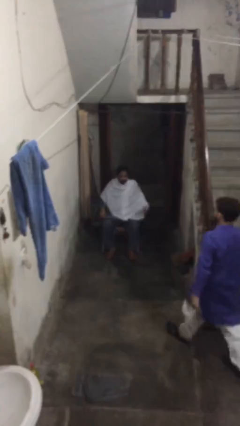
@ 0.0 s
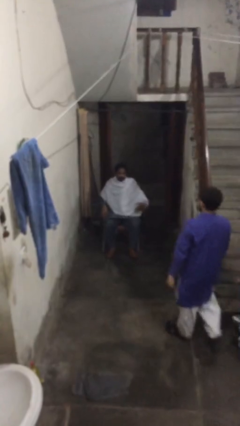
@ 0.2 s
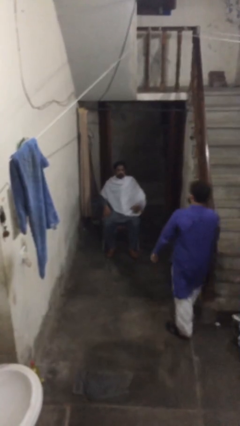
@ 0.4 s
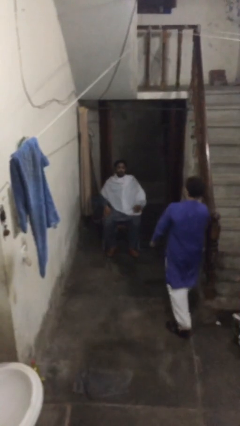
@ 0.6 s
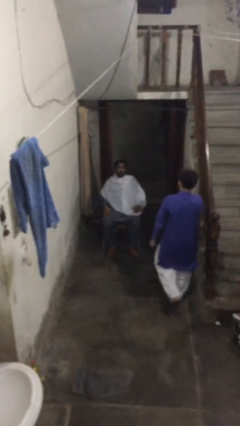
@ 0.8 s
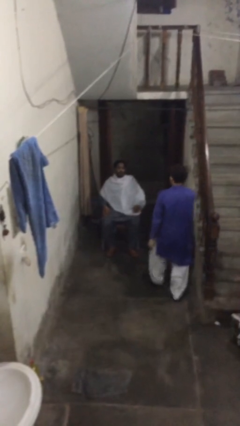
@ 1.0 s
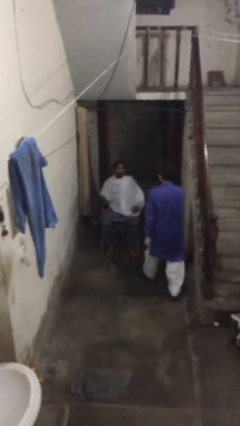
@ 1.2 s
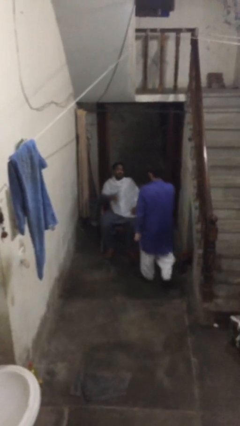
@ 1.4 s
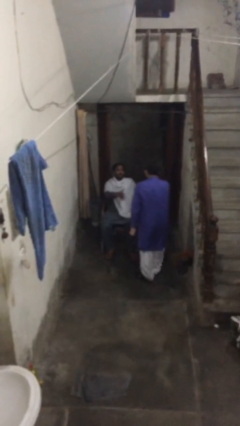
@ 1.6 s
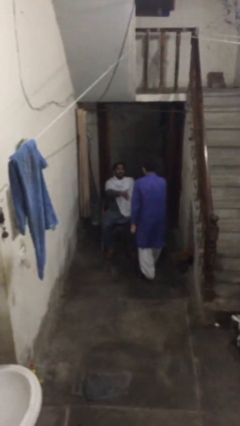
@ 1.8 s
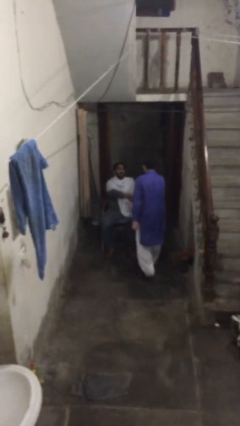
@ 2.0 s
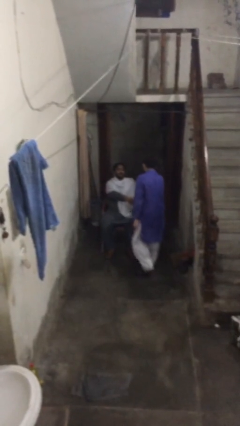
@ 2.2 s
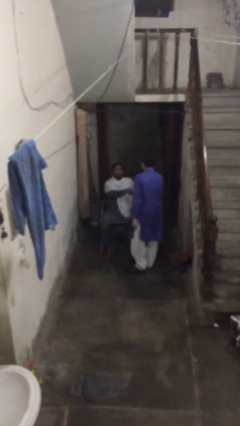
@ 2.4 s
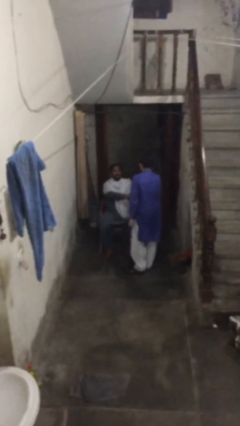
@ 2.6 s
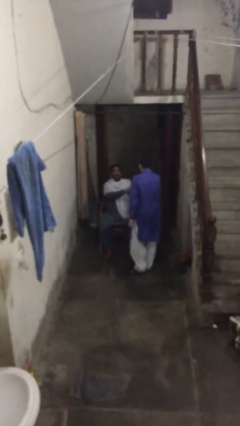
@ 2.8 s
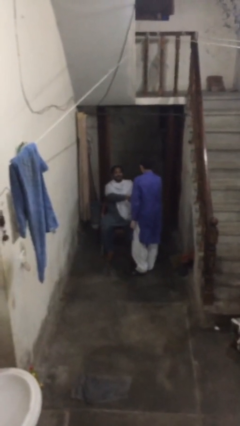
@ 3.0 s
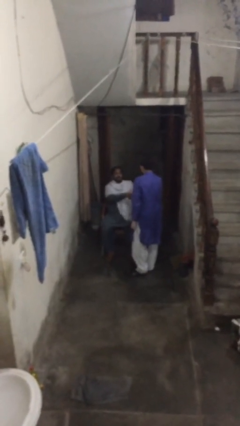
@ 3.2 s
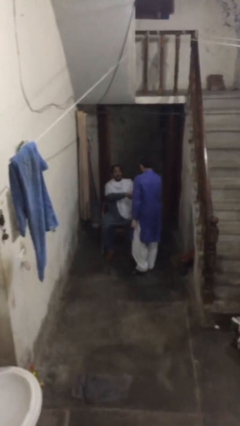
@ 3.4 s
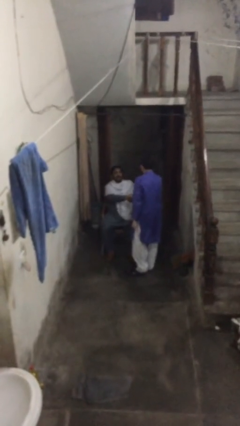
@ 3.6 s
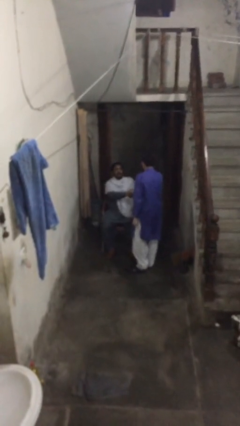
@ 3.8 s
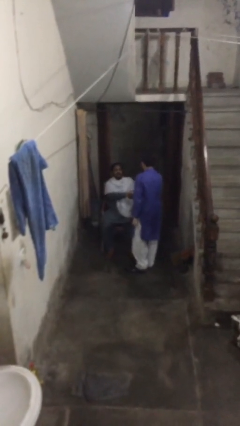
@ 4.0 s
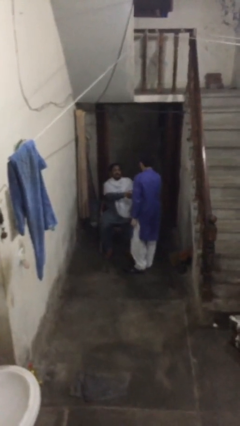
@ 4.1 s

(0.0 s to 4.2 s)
person shakes hand

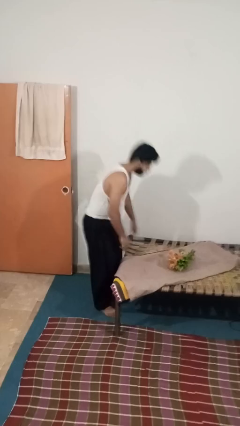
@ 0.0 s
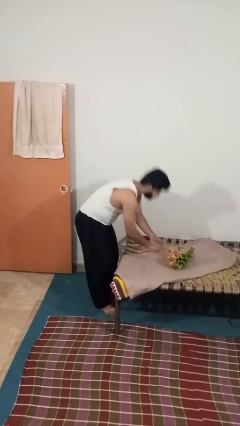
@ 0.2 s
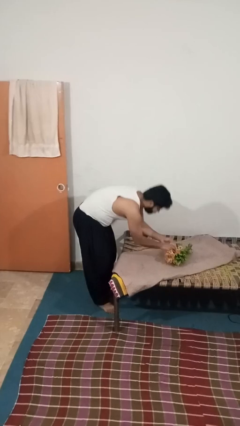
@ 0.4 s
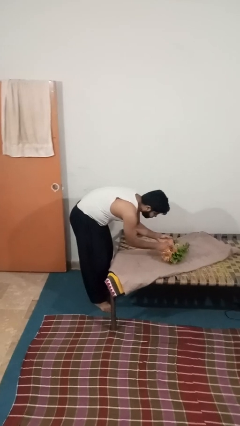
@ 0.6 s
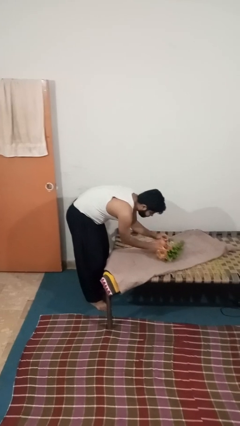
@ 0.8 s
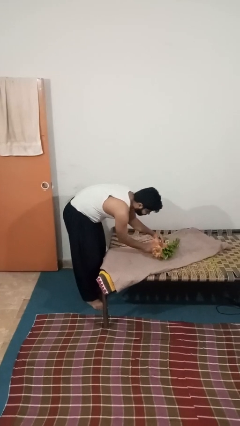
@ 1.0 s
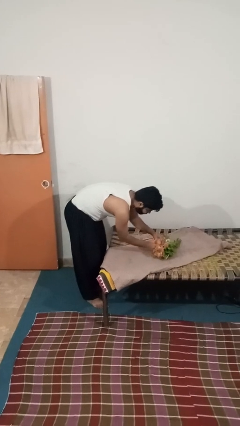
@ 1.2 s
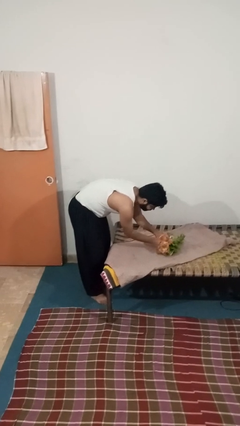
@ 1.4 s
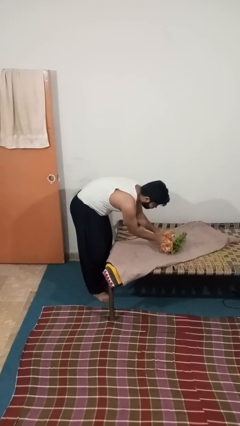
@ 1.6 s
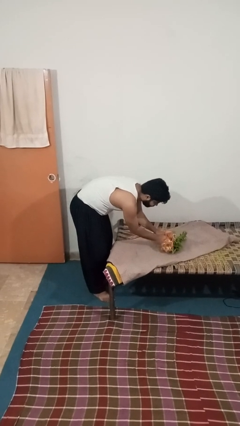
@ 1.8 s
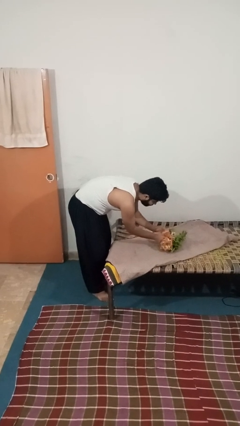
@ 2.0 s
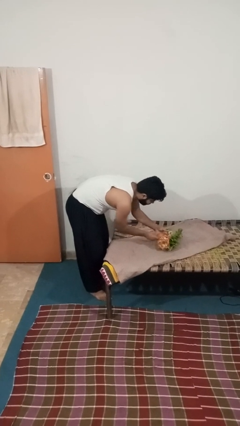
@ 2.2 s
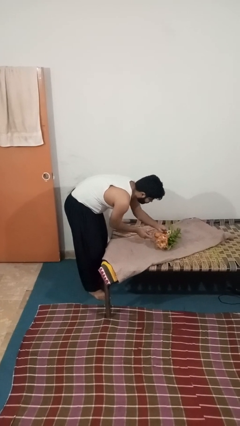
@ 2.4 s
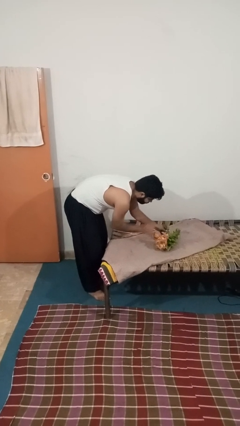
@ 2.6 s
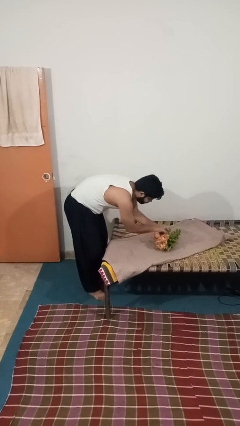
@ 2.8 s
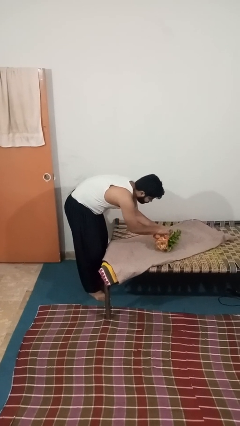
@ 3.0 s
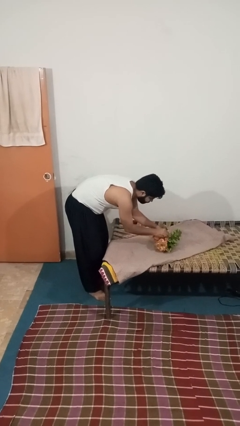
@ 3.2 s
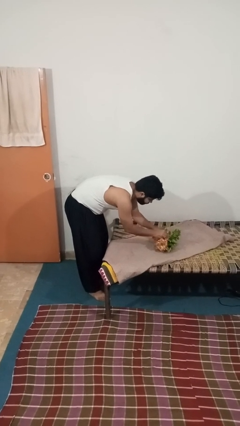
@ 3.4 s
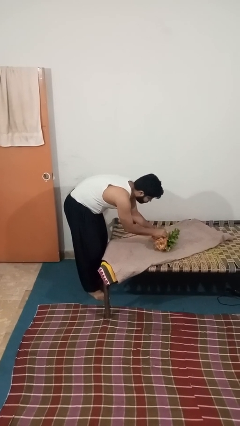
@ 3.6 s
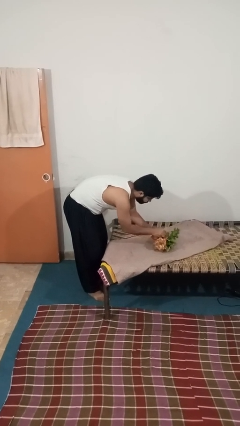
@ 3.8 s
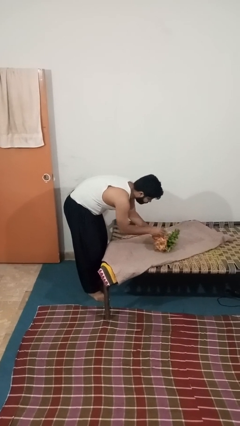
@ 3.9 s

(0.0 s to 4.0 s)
person arranges flowers in vase

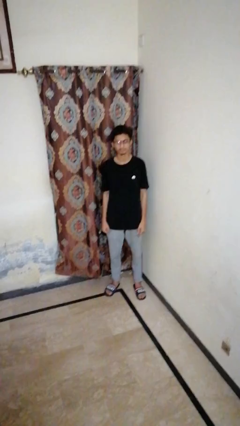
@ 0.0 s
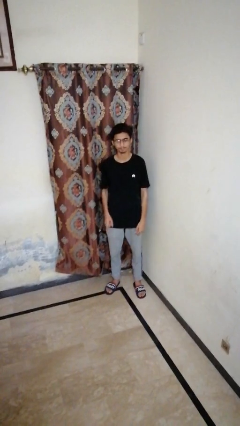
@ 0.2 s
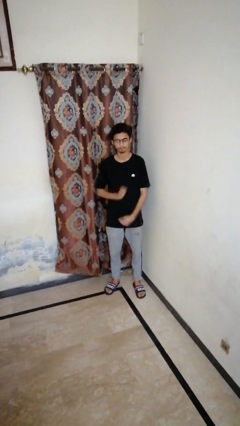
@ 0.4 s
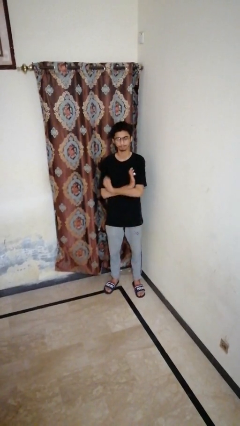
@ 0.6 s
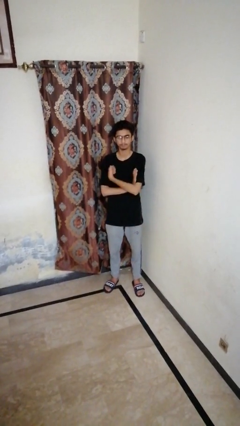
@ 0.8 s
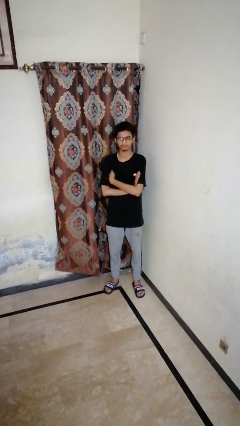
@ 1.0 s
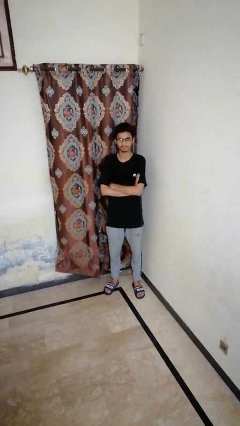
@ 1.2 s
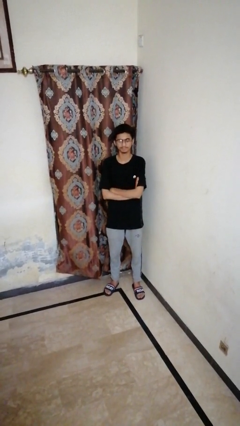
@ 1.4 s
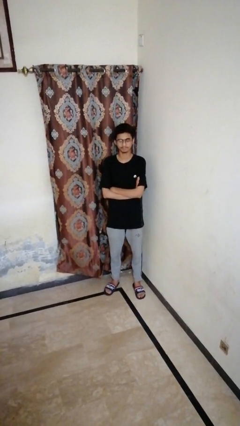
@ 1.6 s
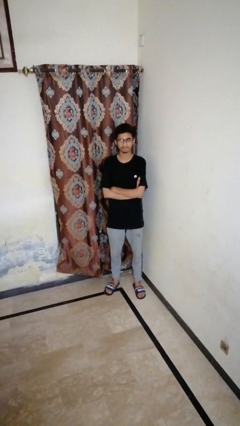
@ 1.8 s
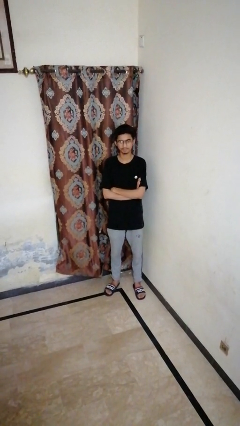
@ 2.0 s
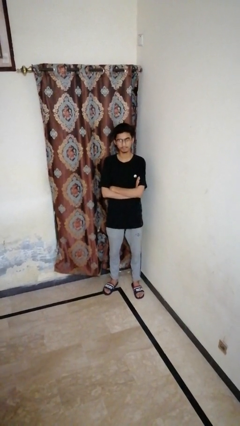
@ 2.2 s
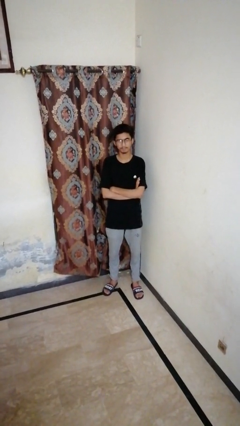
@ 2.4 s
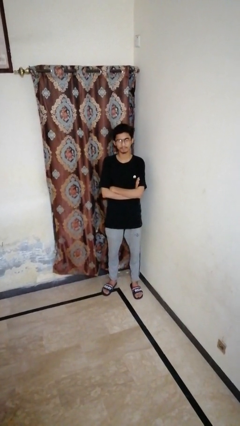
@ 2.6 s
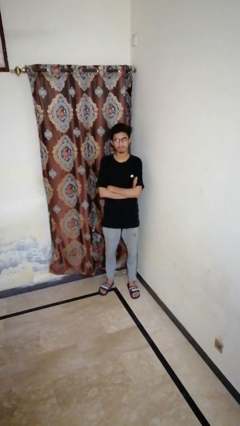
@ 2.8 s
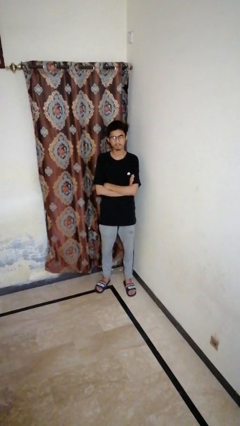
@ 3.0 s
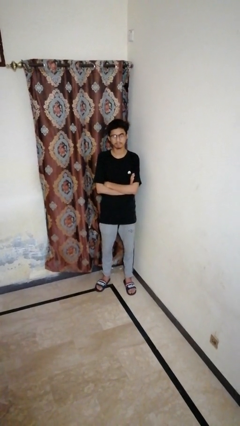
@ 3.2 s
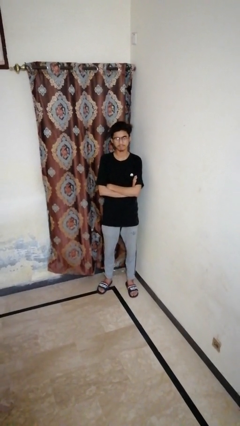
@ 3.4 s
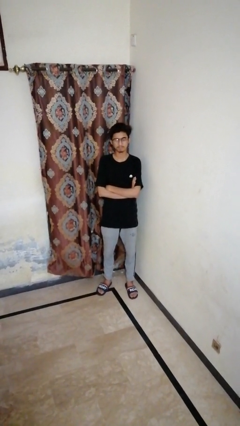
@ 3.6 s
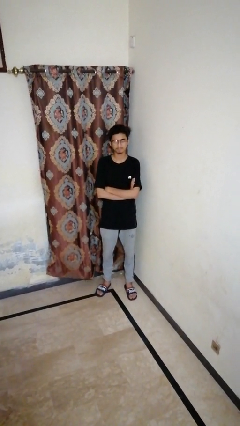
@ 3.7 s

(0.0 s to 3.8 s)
person crosses arms

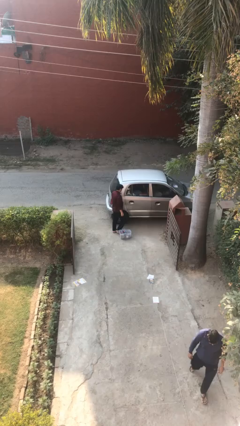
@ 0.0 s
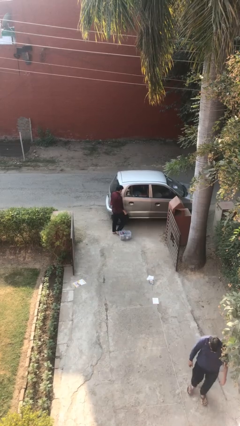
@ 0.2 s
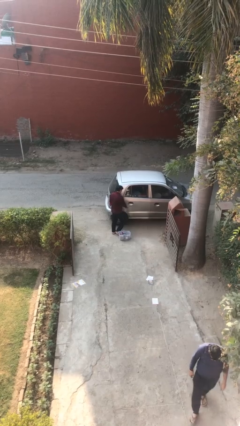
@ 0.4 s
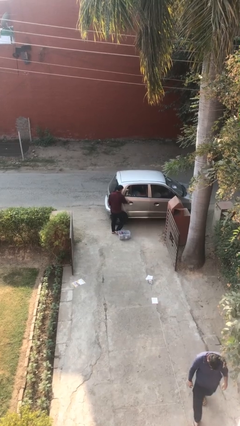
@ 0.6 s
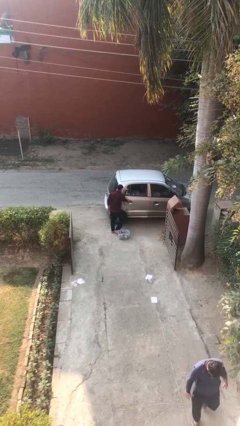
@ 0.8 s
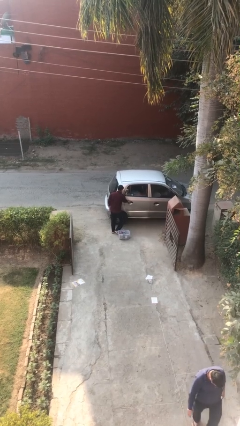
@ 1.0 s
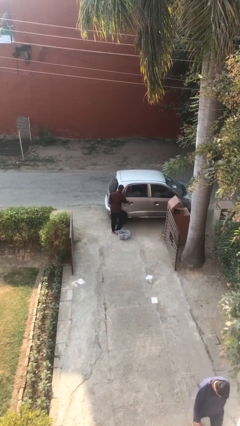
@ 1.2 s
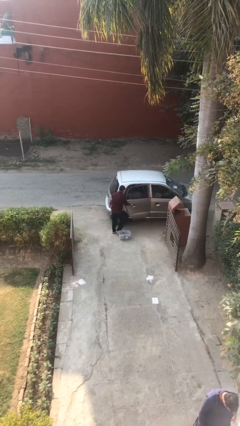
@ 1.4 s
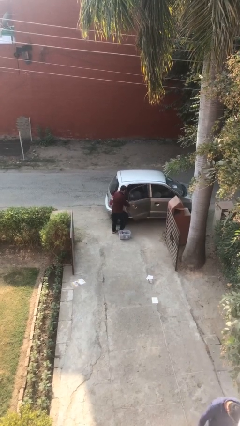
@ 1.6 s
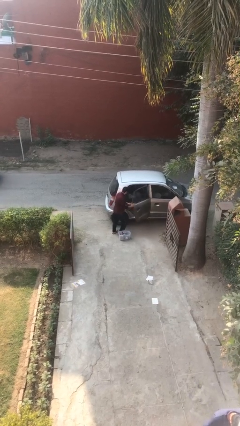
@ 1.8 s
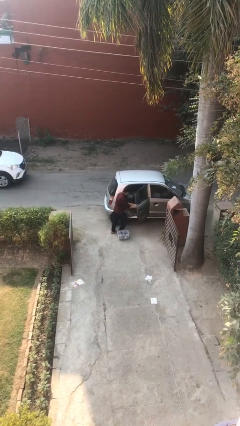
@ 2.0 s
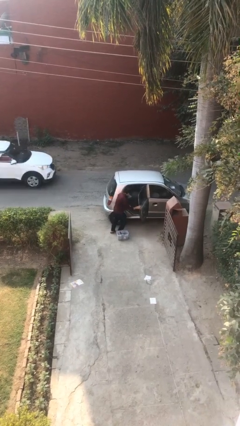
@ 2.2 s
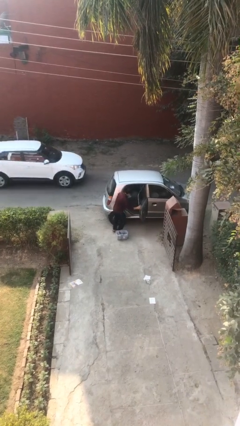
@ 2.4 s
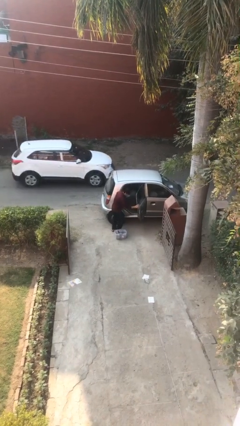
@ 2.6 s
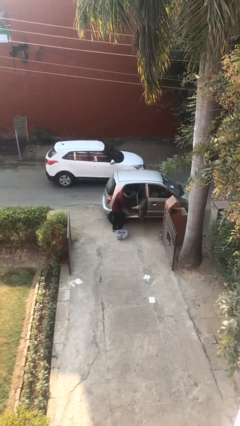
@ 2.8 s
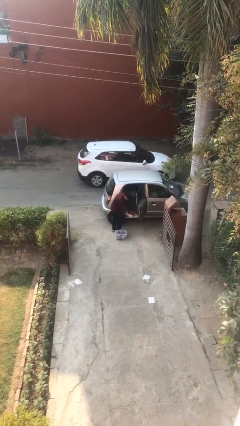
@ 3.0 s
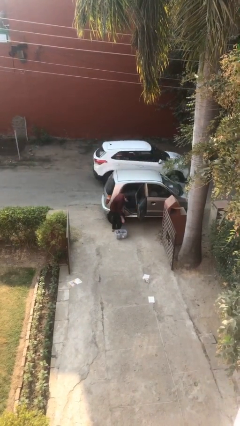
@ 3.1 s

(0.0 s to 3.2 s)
person opens car door

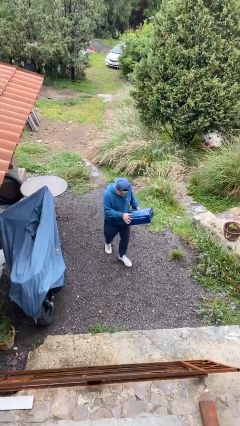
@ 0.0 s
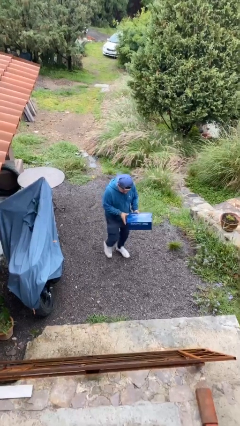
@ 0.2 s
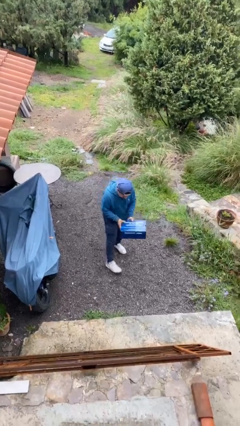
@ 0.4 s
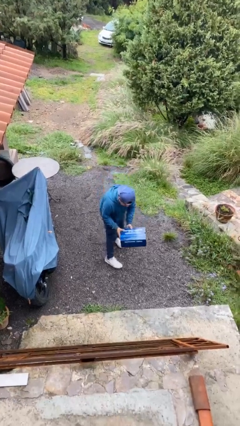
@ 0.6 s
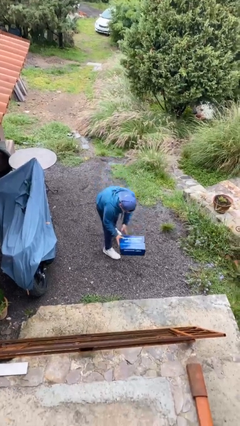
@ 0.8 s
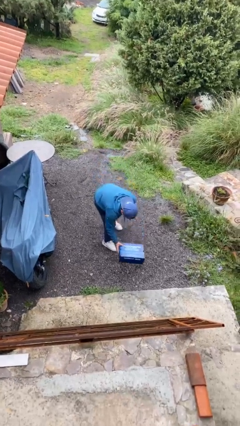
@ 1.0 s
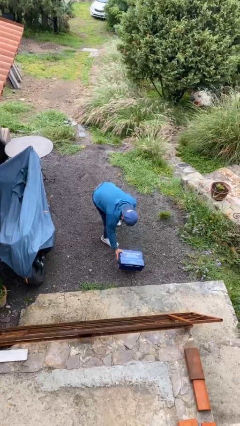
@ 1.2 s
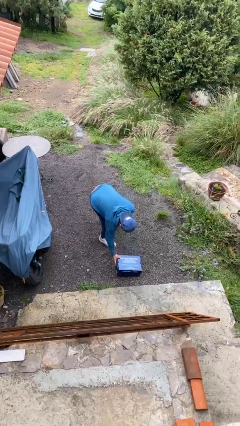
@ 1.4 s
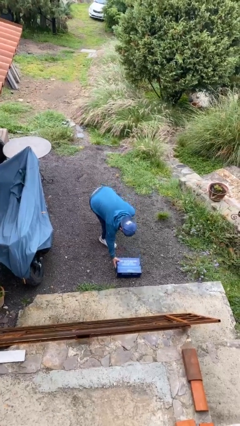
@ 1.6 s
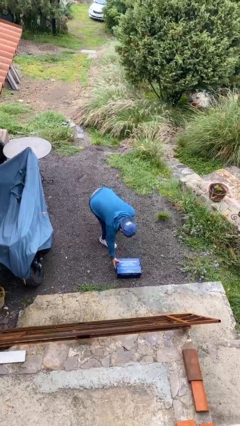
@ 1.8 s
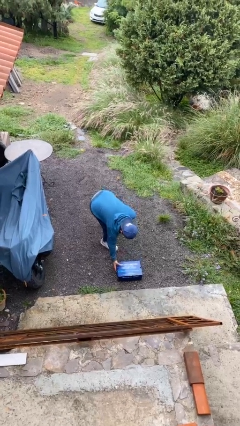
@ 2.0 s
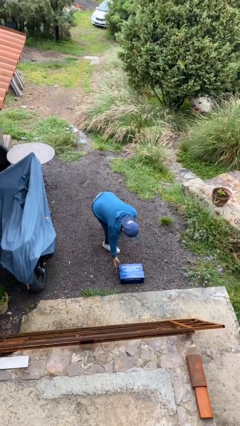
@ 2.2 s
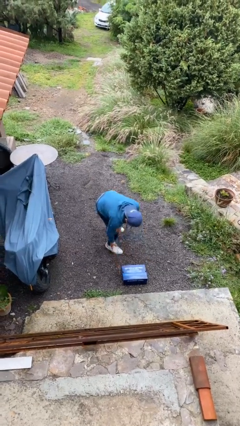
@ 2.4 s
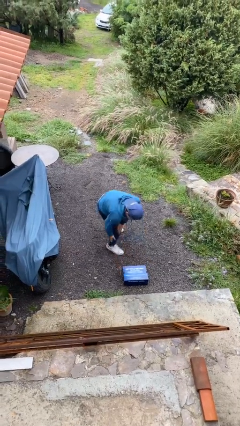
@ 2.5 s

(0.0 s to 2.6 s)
person puts down object on floor
